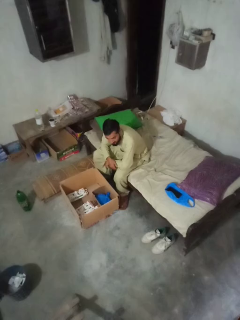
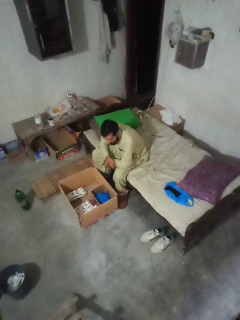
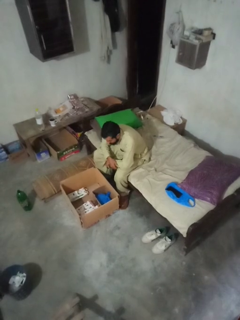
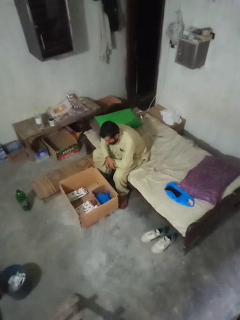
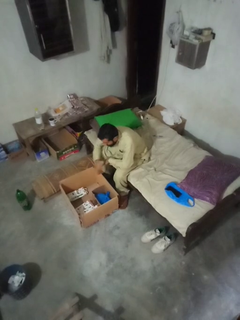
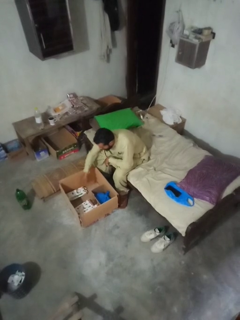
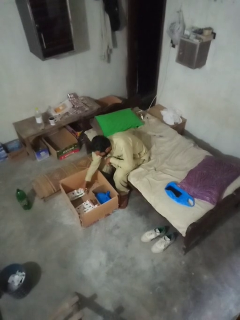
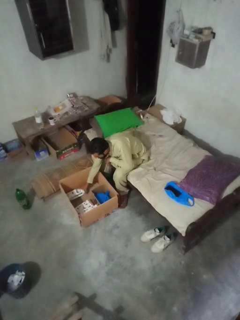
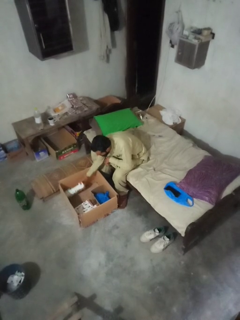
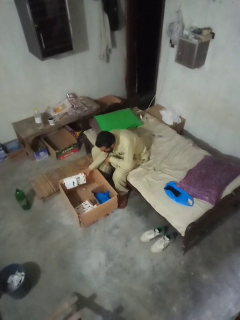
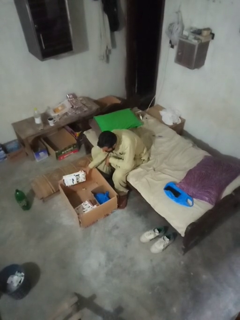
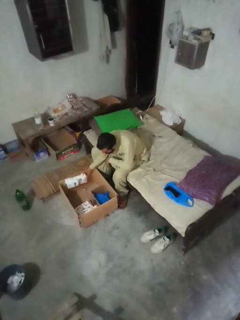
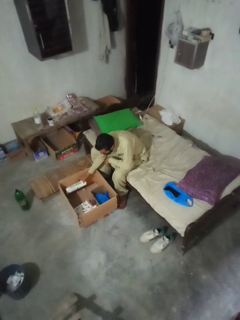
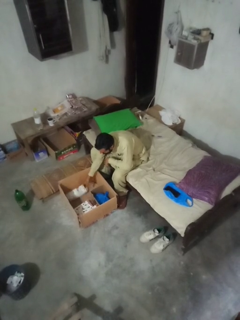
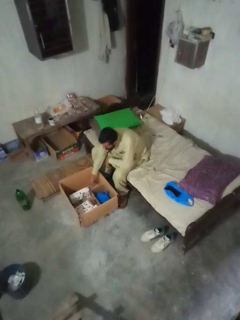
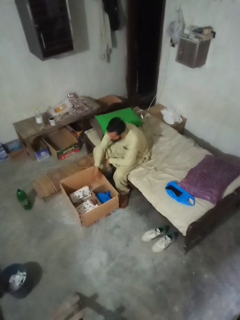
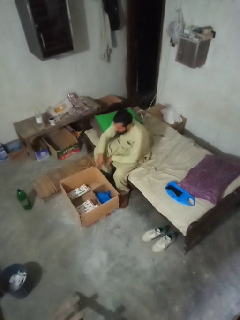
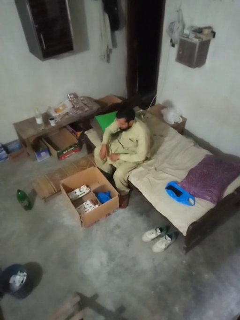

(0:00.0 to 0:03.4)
person searches in box

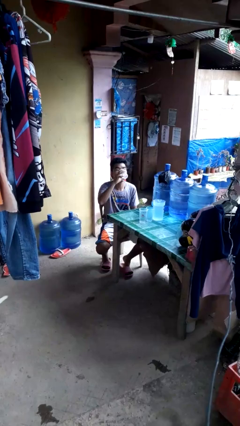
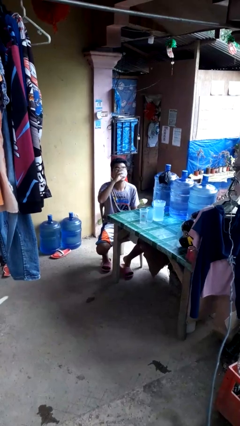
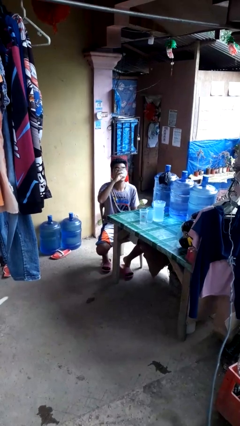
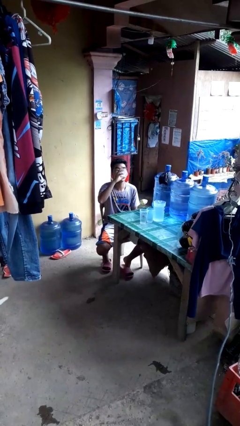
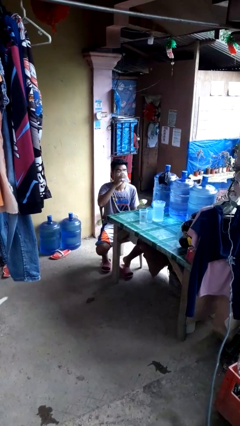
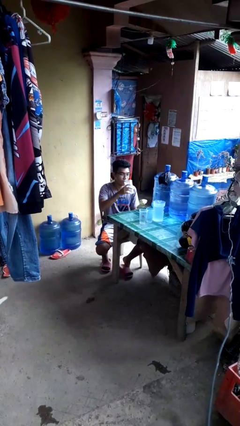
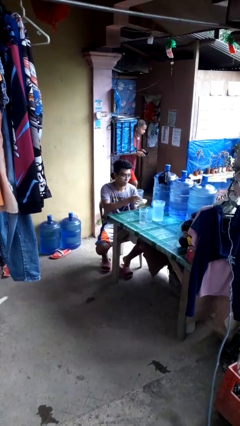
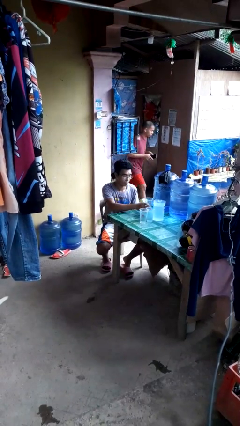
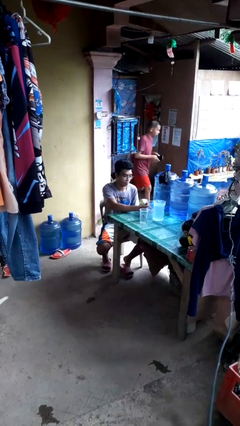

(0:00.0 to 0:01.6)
person drinks from shotglass

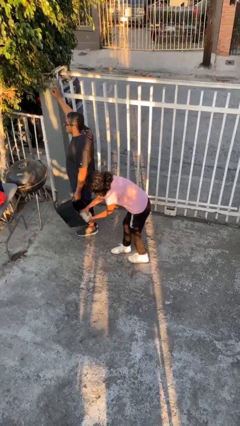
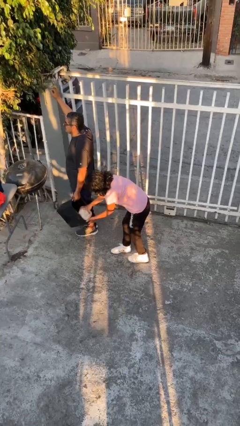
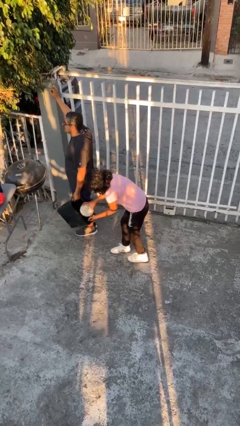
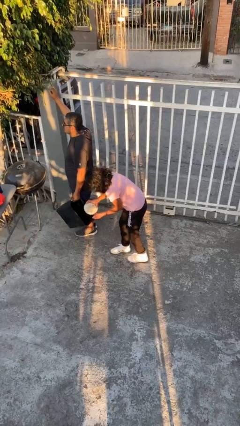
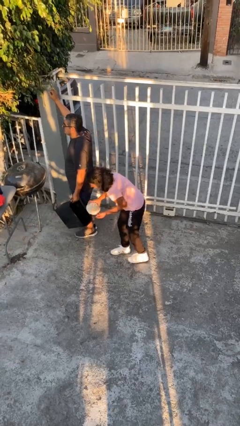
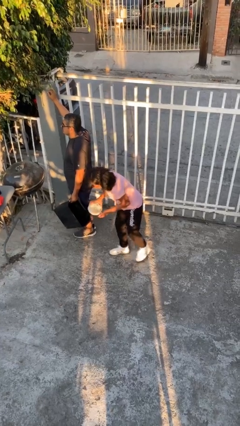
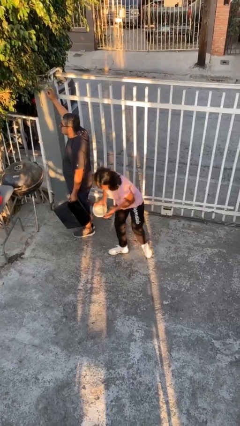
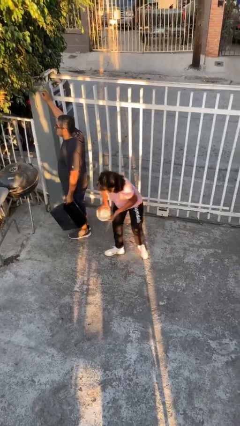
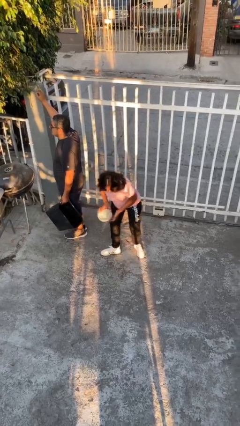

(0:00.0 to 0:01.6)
person steals object from person

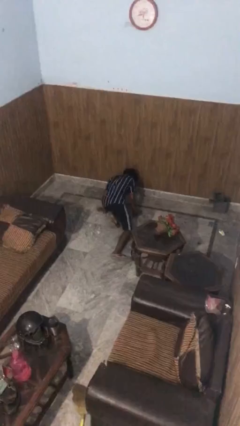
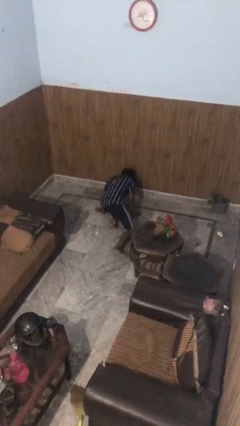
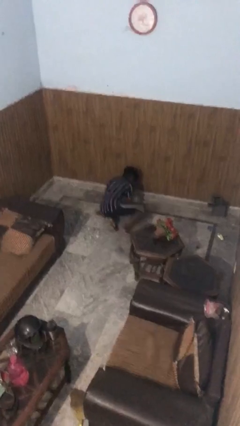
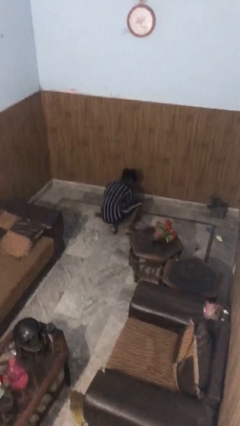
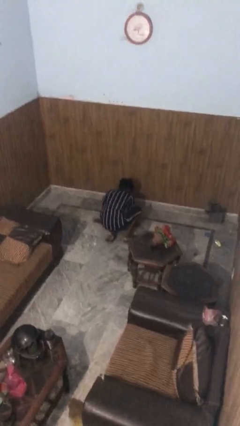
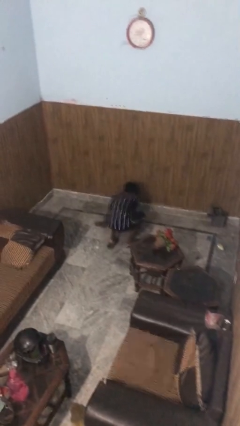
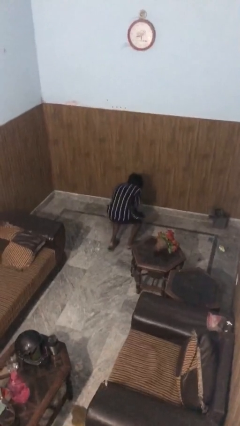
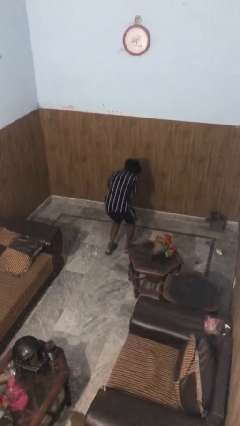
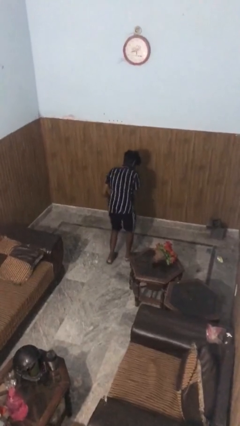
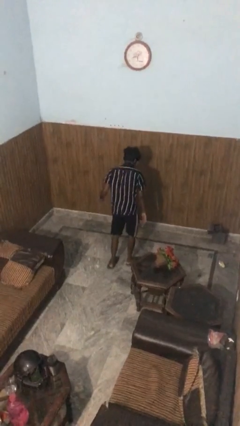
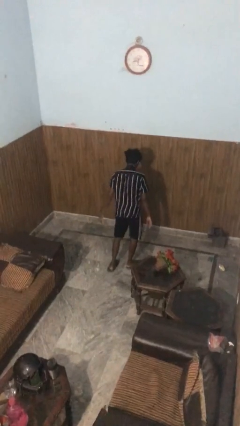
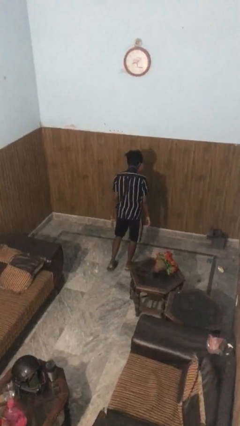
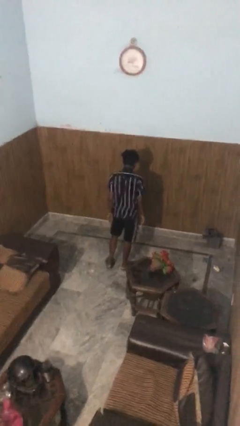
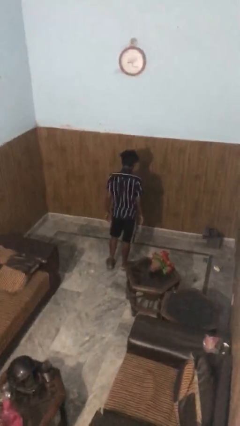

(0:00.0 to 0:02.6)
person stands up from floor

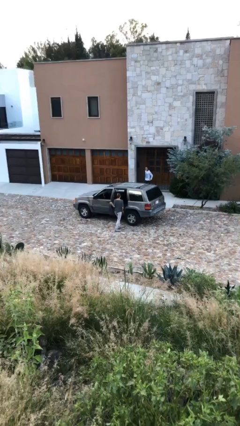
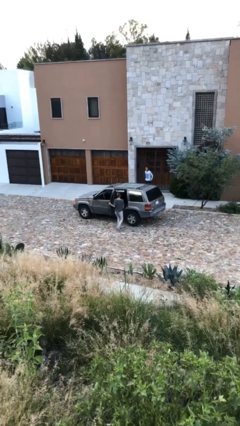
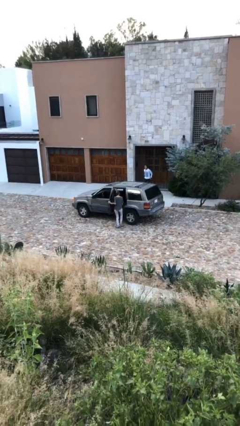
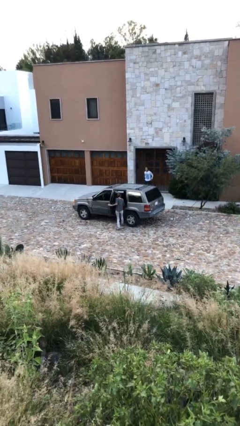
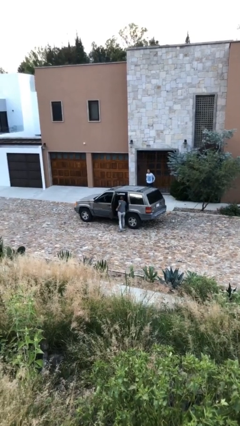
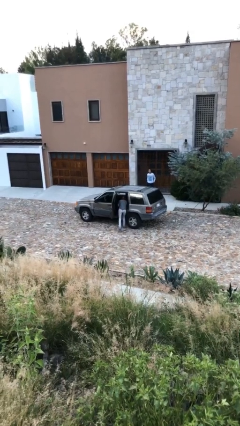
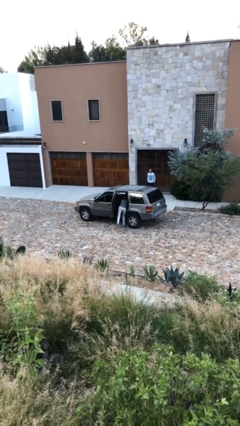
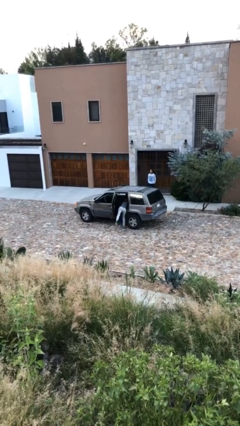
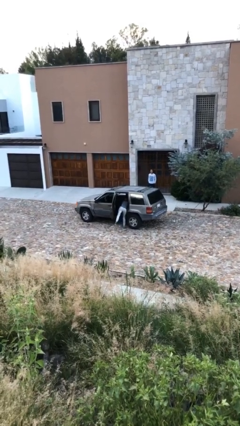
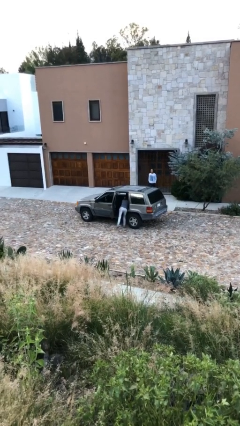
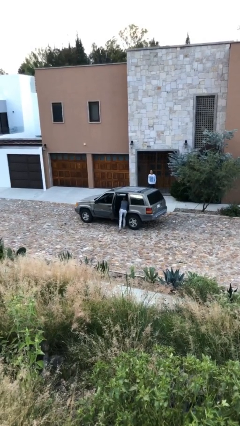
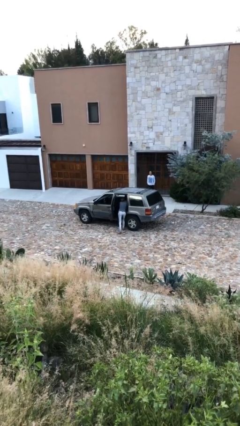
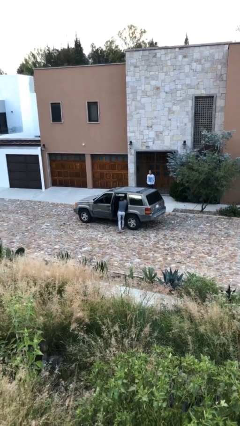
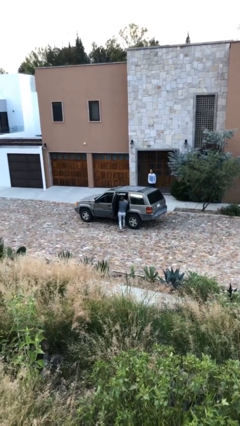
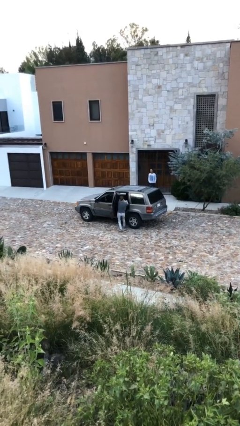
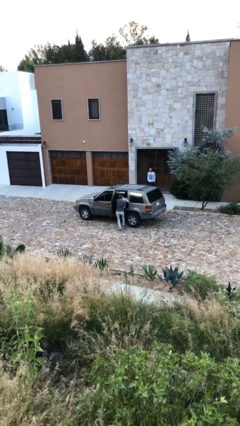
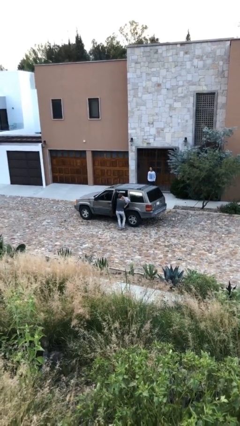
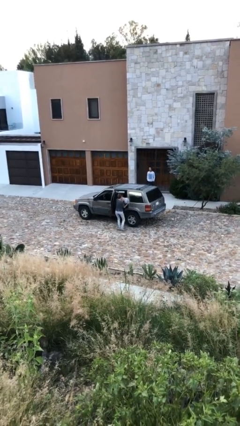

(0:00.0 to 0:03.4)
person unloads car

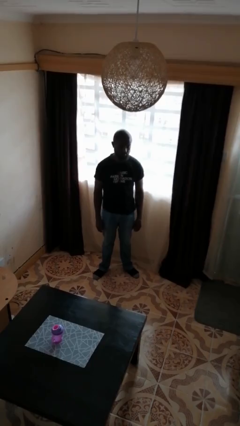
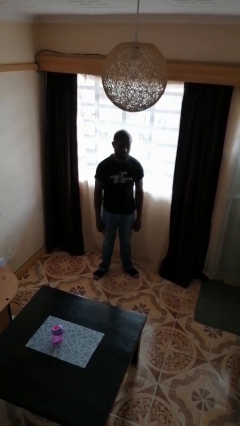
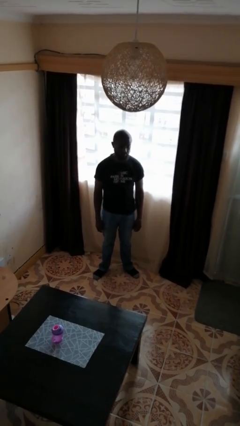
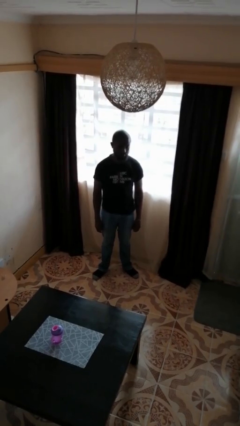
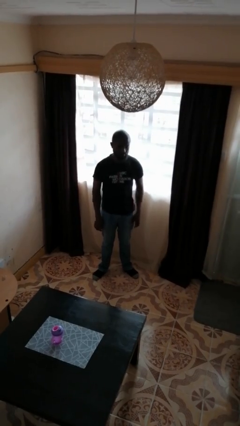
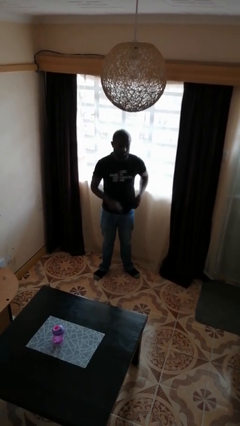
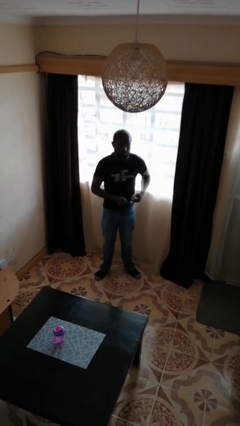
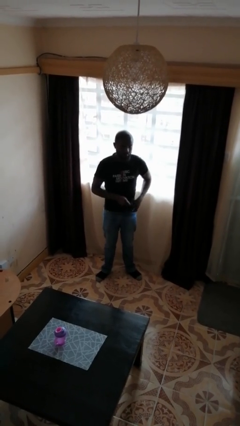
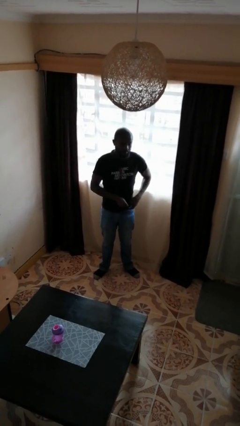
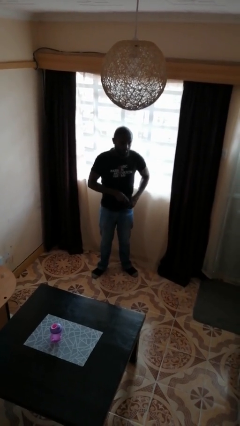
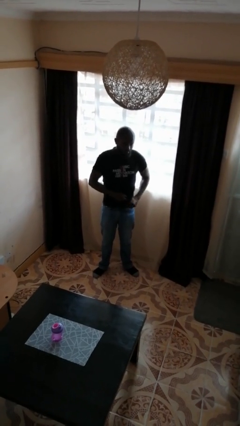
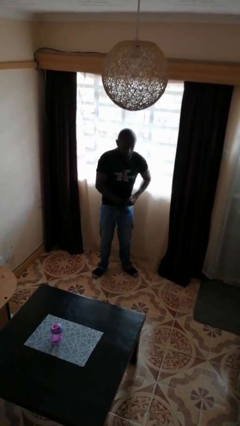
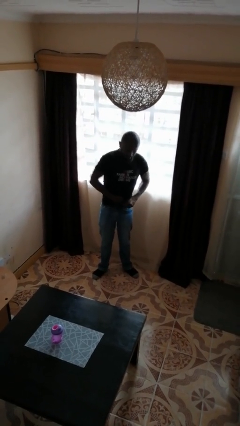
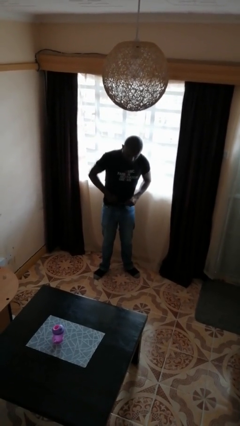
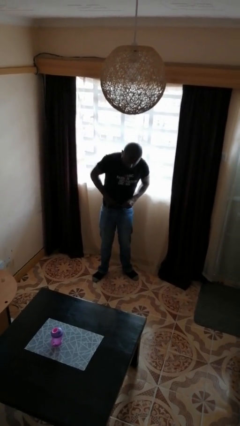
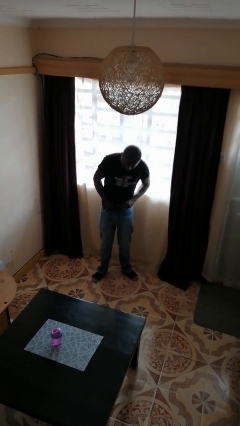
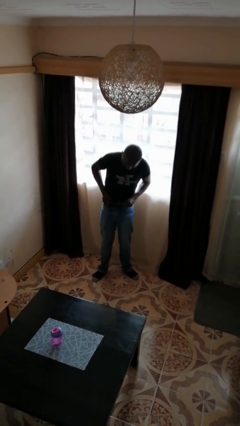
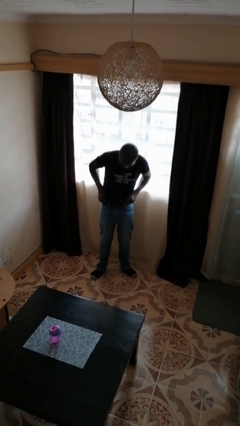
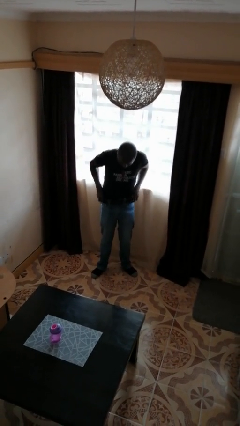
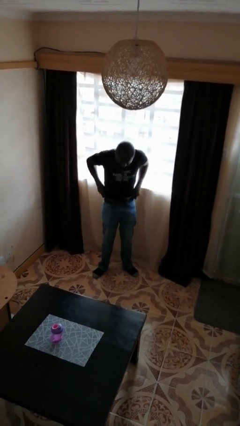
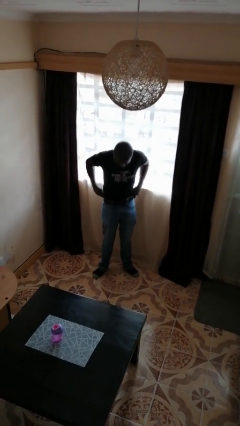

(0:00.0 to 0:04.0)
person tucks in shirt

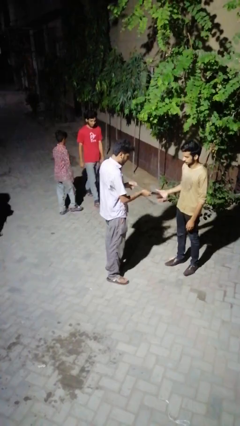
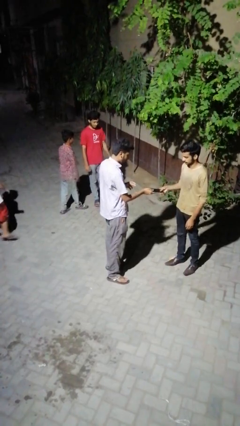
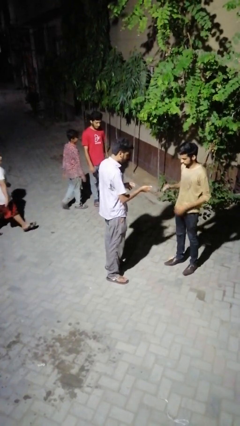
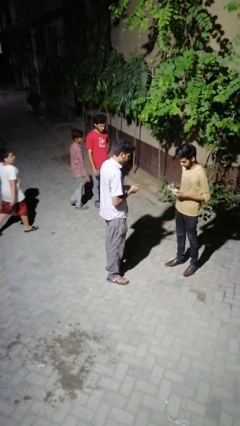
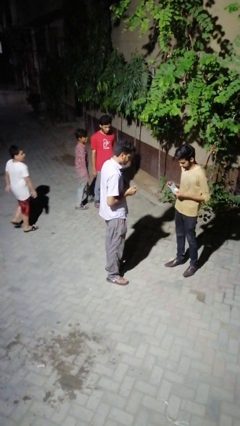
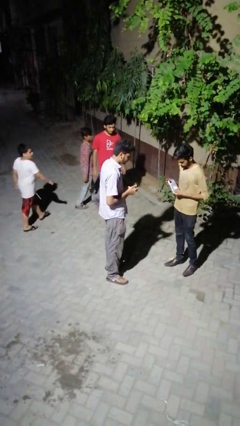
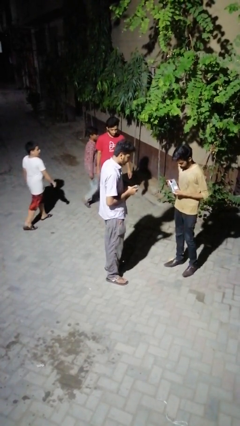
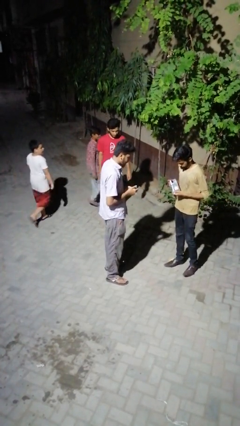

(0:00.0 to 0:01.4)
person transfers object to person

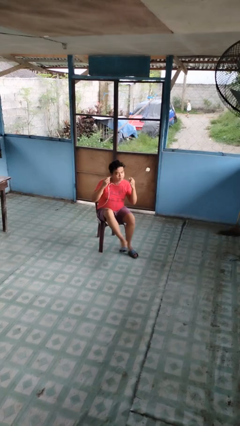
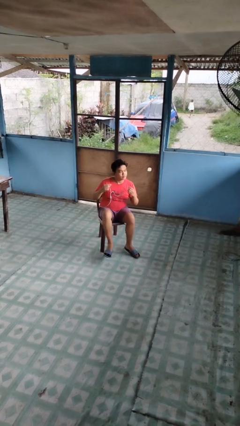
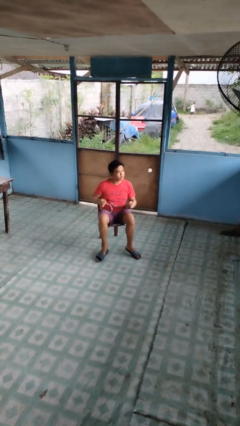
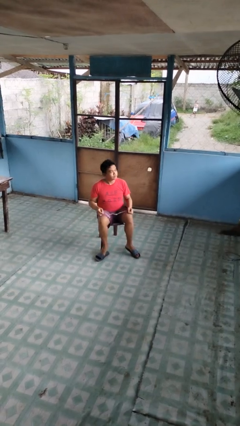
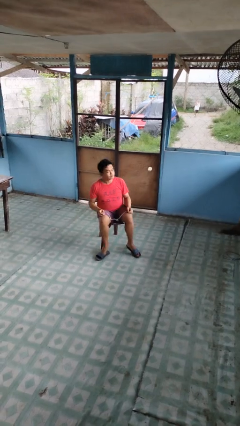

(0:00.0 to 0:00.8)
person takes off headphones
